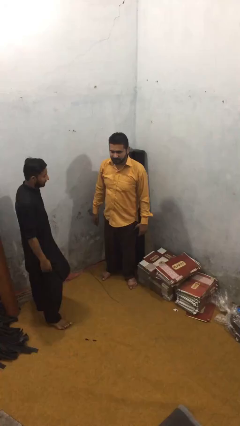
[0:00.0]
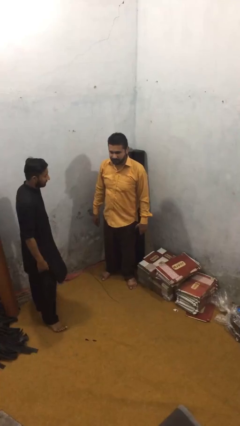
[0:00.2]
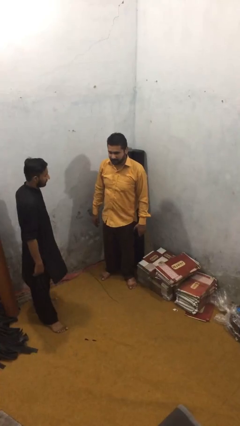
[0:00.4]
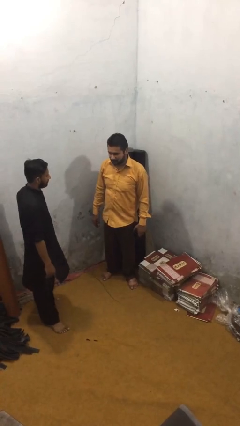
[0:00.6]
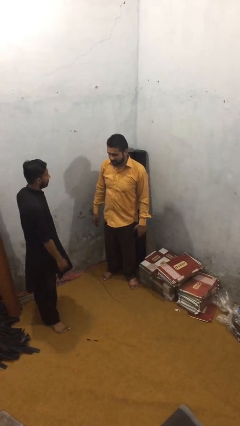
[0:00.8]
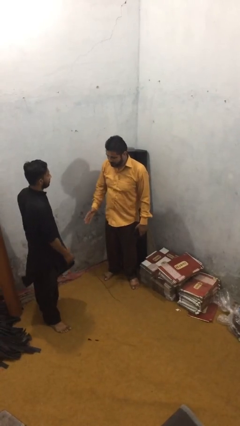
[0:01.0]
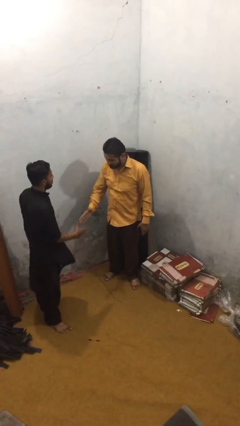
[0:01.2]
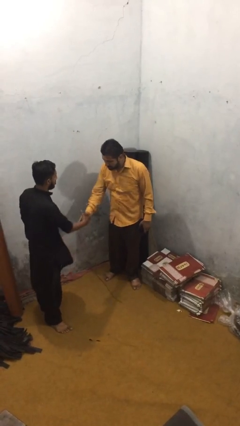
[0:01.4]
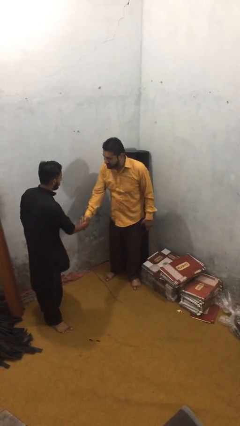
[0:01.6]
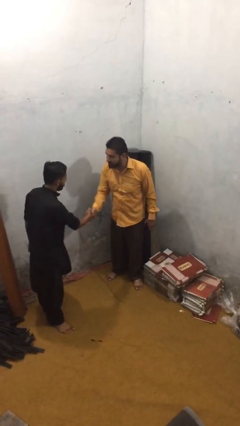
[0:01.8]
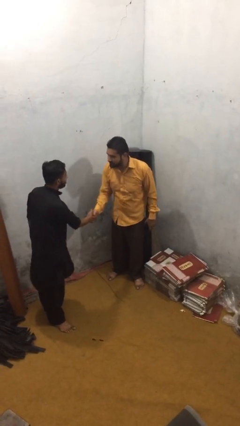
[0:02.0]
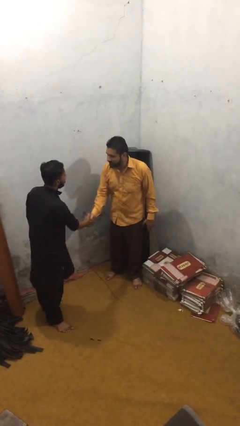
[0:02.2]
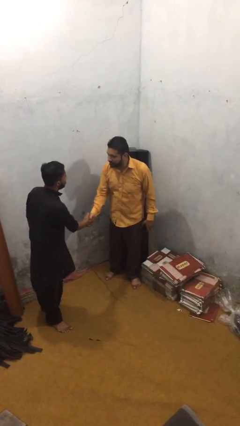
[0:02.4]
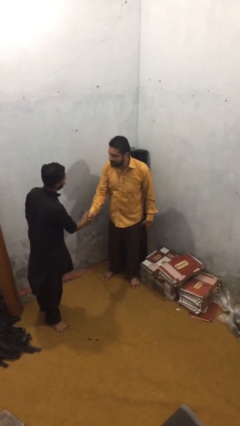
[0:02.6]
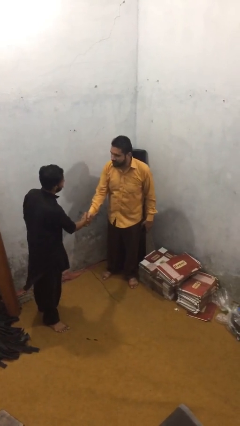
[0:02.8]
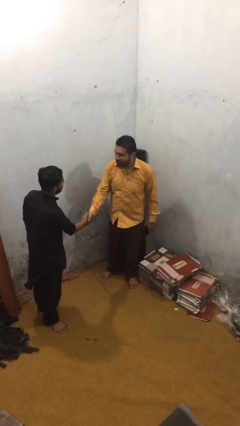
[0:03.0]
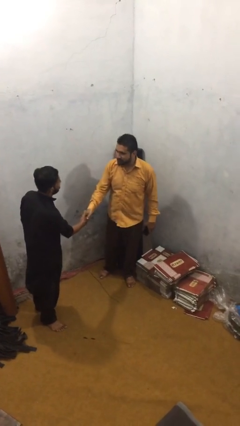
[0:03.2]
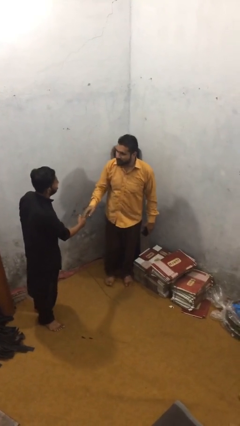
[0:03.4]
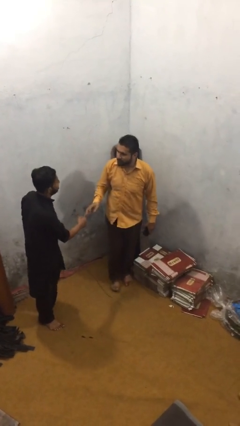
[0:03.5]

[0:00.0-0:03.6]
person shakes hand

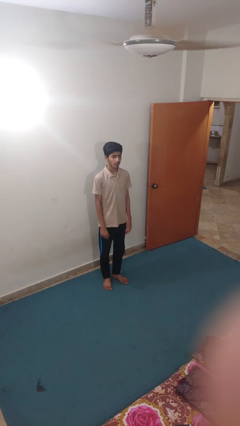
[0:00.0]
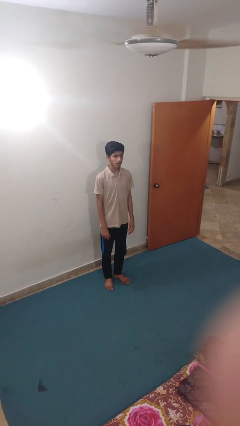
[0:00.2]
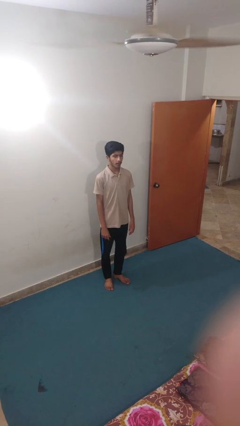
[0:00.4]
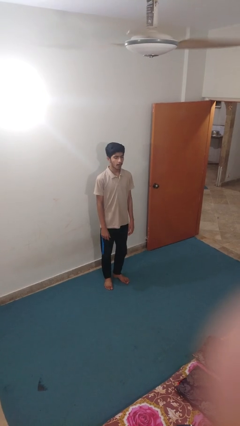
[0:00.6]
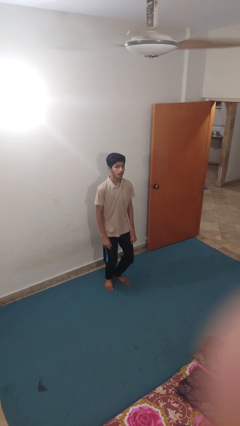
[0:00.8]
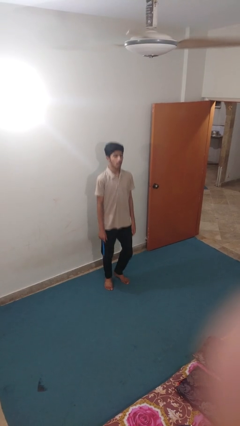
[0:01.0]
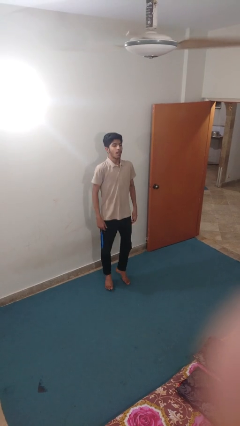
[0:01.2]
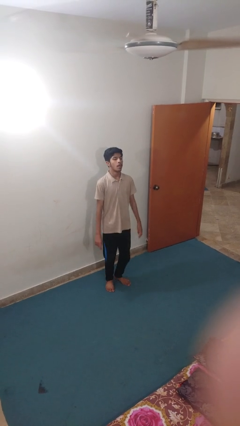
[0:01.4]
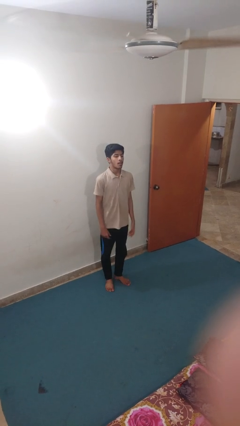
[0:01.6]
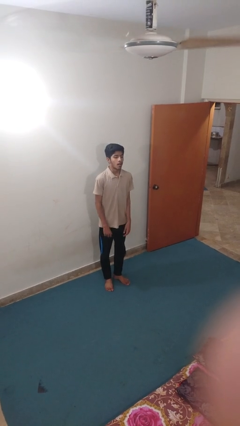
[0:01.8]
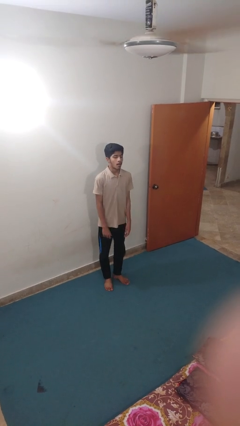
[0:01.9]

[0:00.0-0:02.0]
person jumps

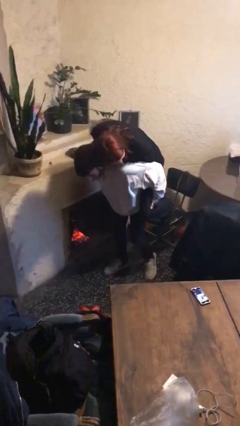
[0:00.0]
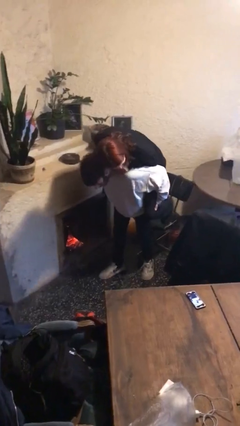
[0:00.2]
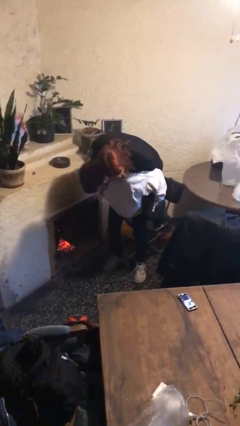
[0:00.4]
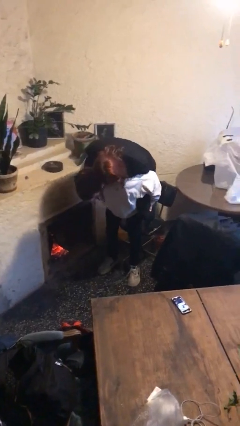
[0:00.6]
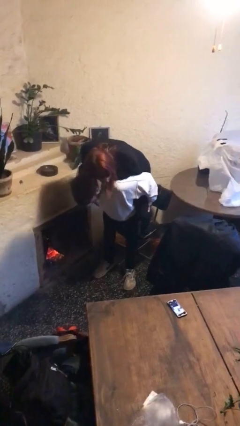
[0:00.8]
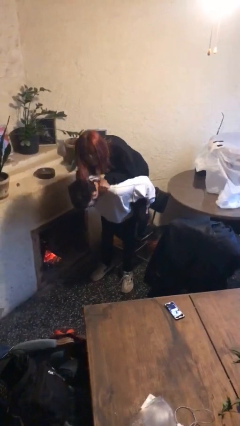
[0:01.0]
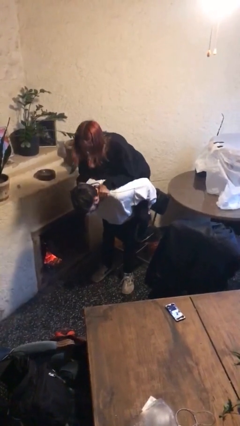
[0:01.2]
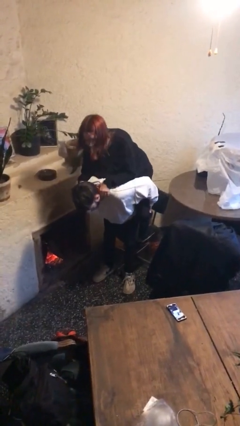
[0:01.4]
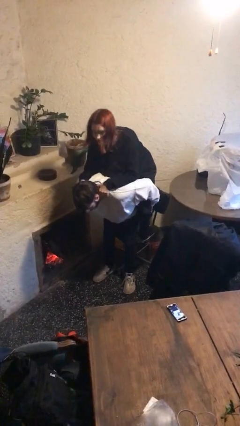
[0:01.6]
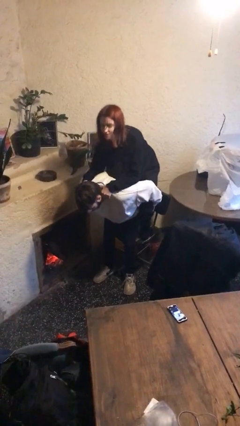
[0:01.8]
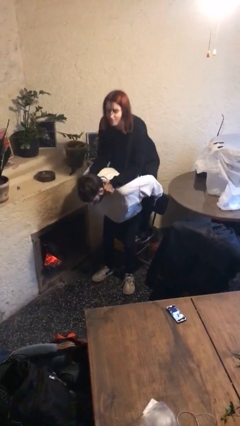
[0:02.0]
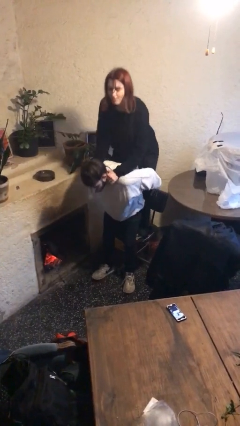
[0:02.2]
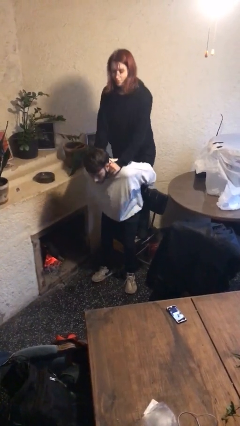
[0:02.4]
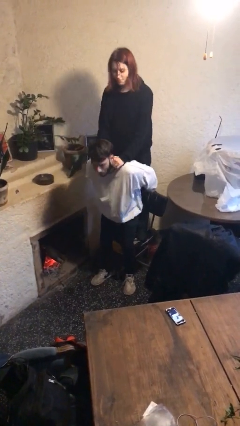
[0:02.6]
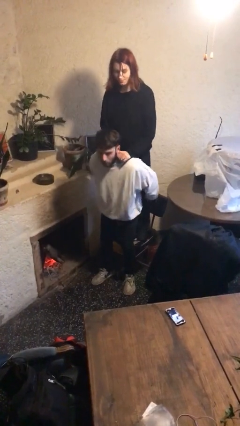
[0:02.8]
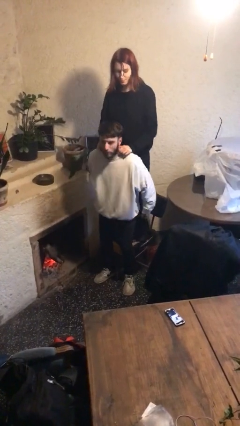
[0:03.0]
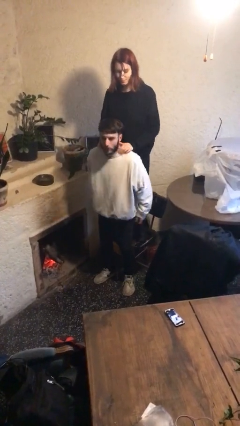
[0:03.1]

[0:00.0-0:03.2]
person puts down person

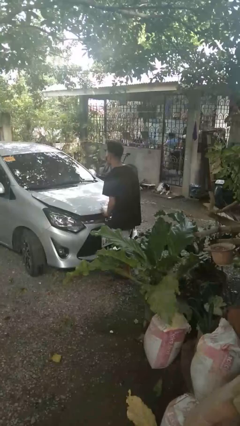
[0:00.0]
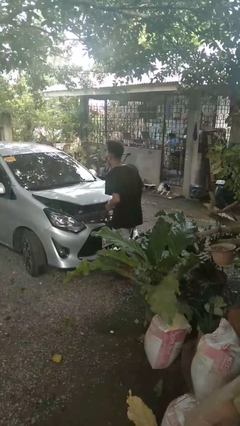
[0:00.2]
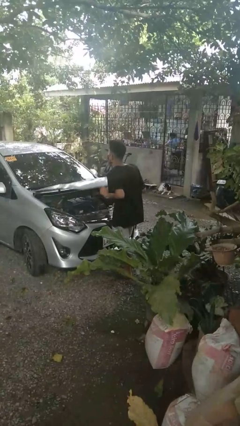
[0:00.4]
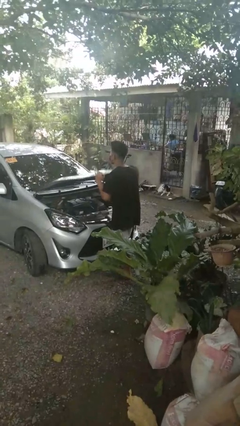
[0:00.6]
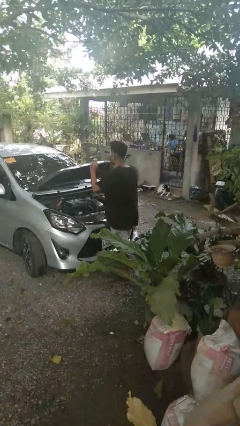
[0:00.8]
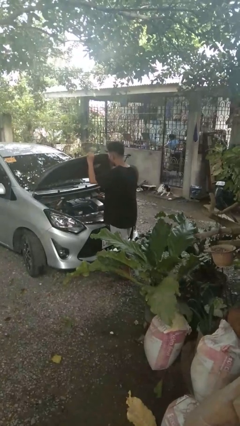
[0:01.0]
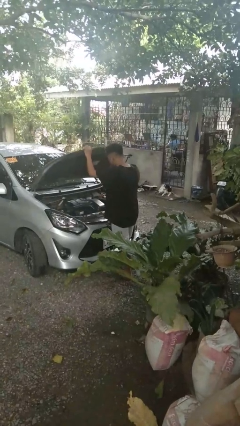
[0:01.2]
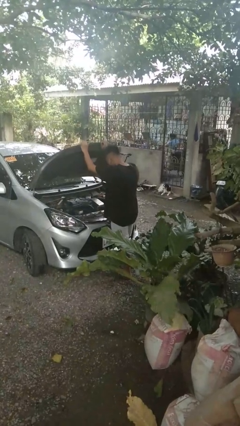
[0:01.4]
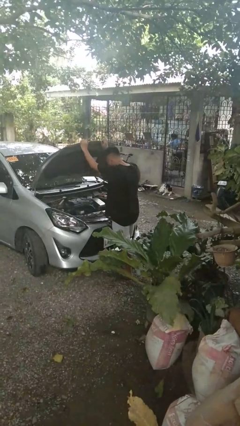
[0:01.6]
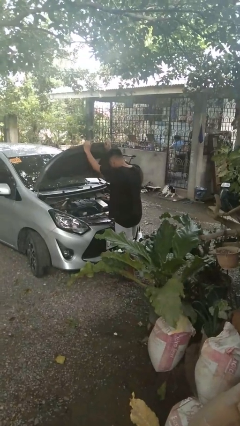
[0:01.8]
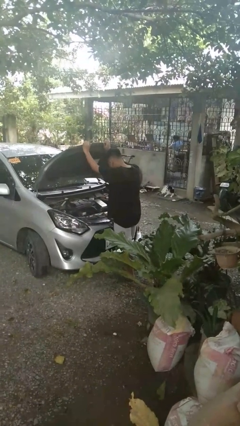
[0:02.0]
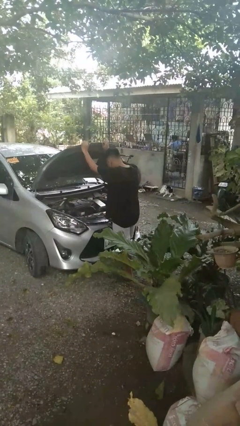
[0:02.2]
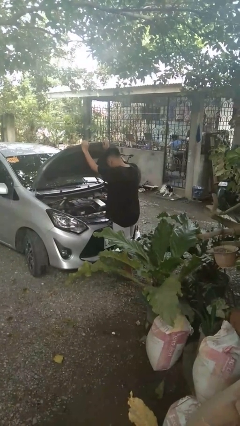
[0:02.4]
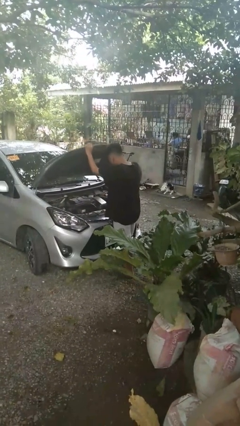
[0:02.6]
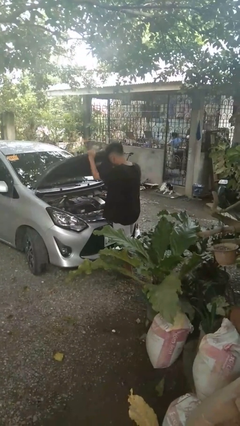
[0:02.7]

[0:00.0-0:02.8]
person opens car hood

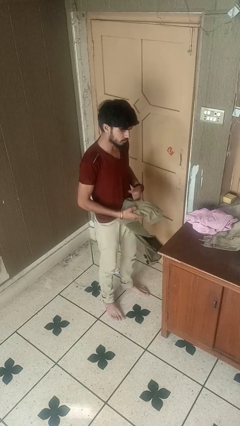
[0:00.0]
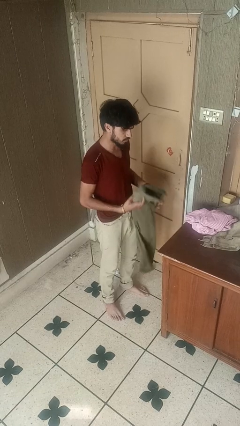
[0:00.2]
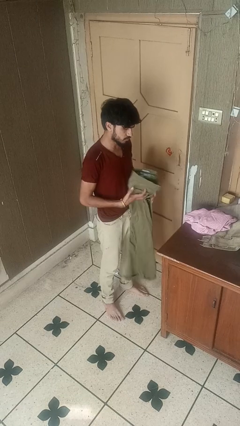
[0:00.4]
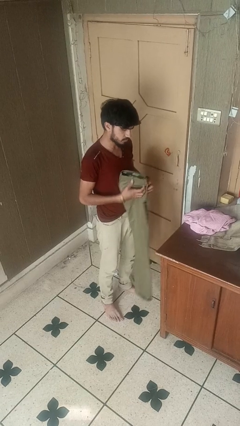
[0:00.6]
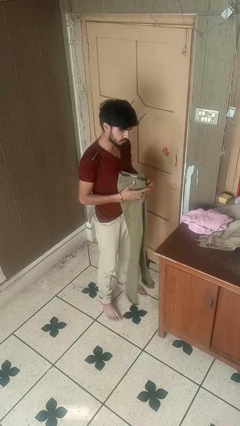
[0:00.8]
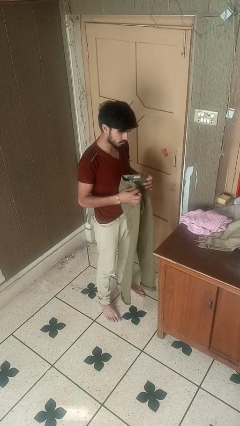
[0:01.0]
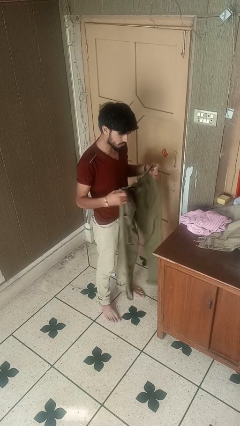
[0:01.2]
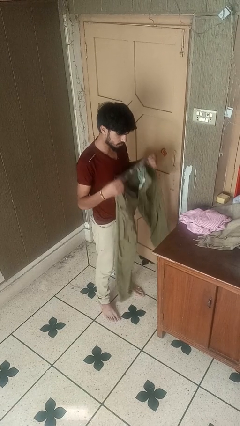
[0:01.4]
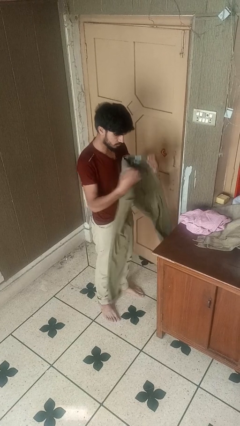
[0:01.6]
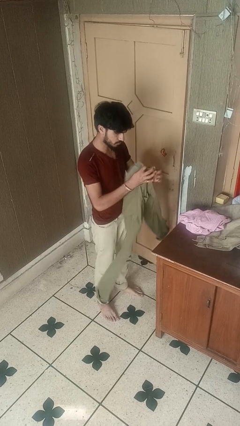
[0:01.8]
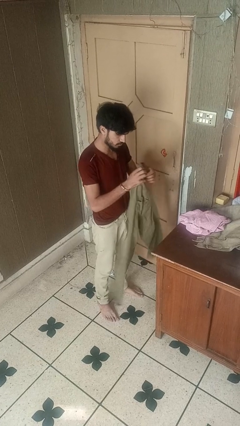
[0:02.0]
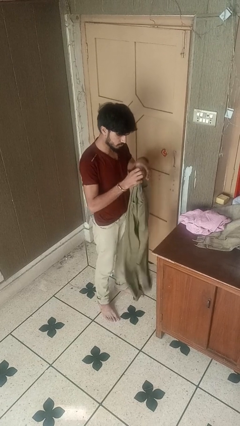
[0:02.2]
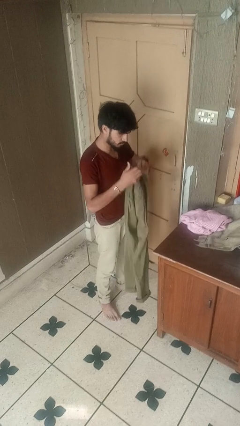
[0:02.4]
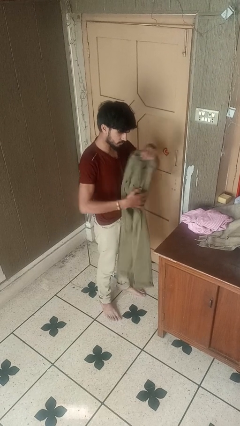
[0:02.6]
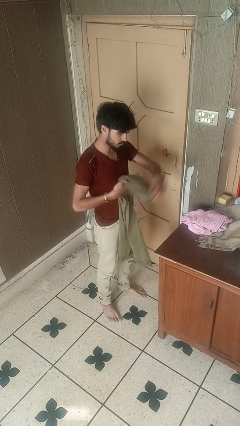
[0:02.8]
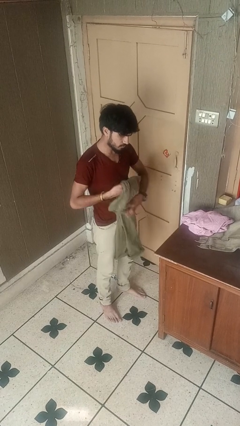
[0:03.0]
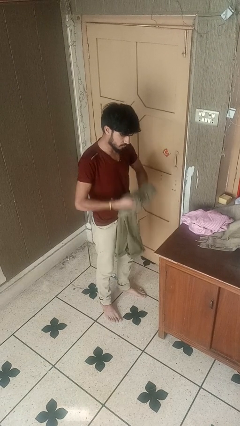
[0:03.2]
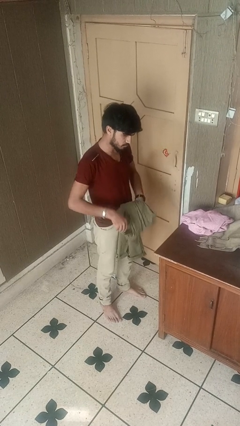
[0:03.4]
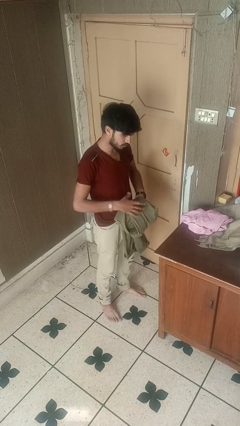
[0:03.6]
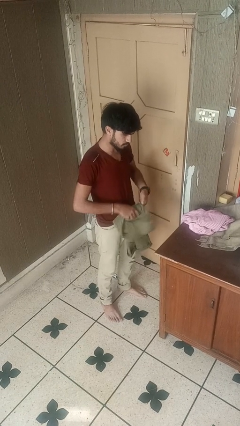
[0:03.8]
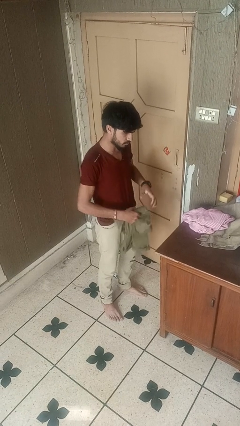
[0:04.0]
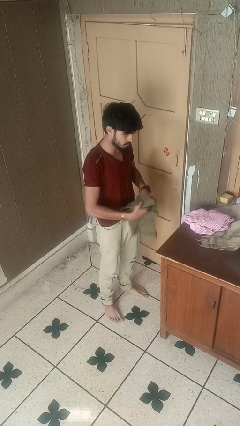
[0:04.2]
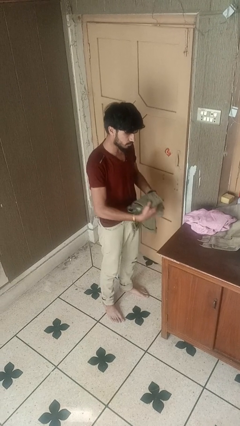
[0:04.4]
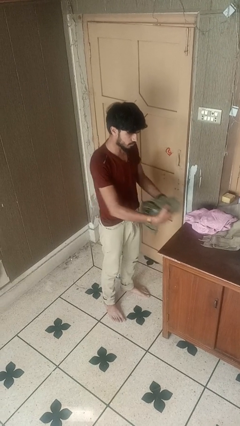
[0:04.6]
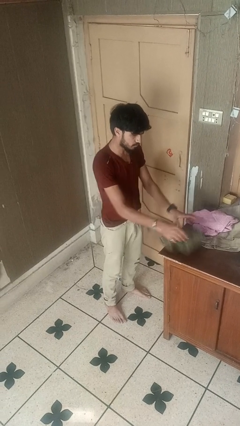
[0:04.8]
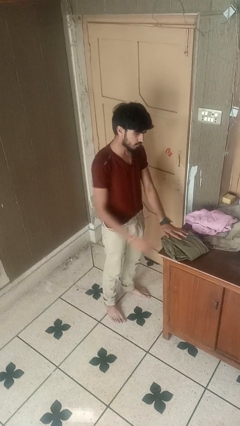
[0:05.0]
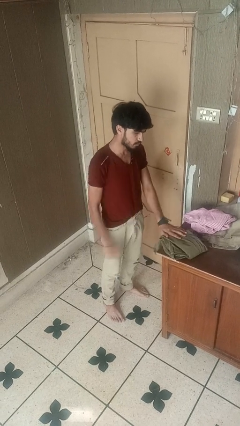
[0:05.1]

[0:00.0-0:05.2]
person folds pants

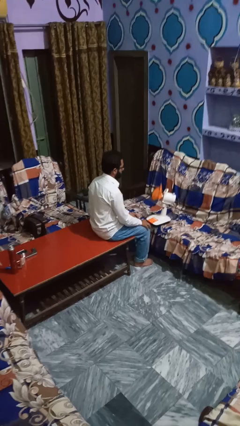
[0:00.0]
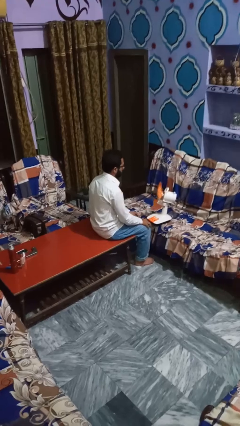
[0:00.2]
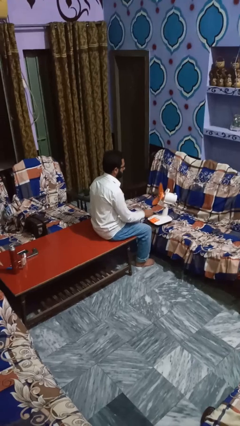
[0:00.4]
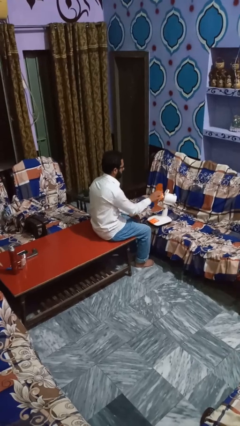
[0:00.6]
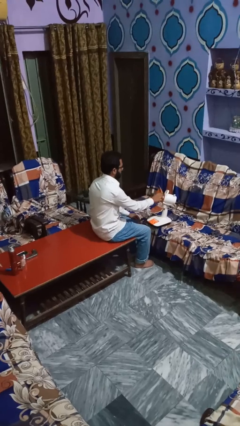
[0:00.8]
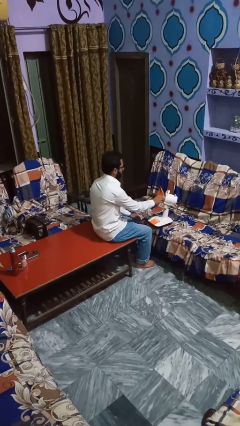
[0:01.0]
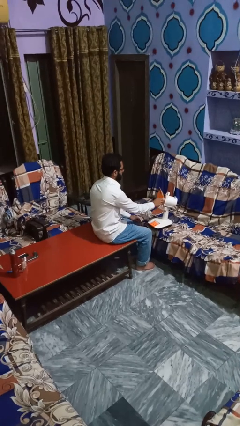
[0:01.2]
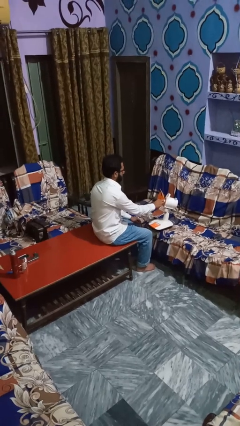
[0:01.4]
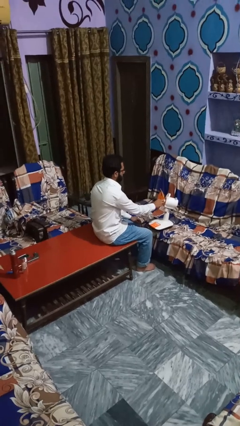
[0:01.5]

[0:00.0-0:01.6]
person turns off fan
